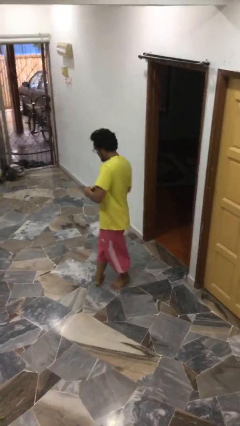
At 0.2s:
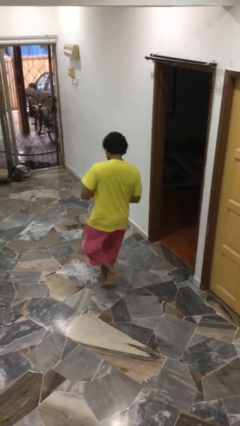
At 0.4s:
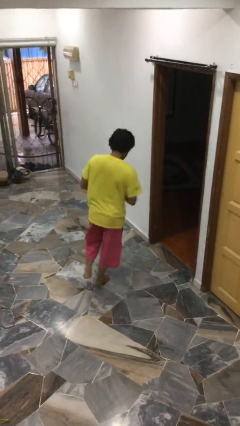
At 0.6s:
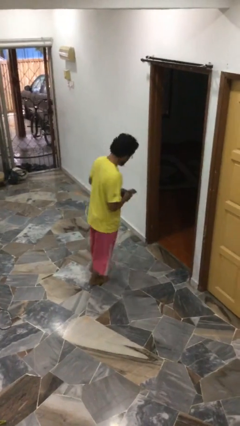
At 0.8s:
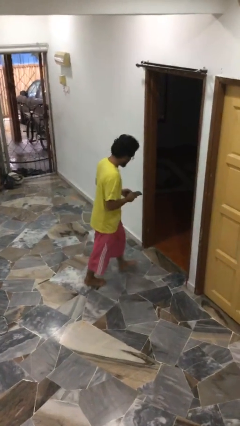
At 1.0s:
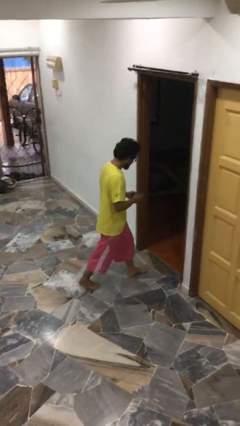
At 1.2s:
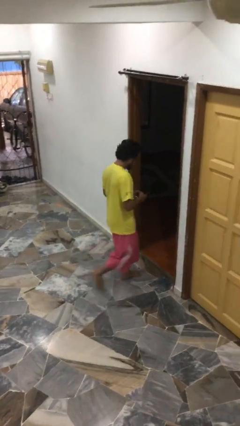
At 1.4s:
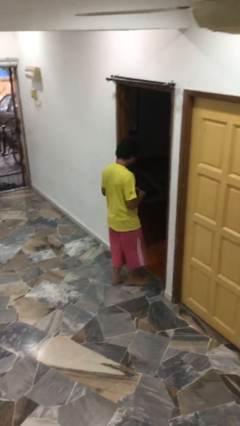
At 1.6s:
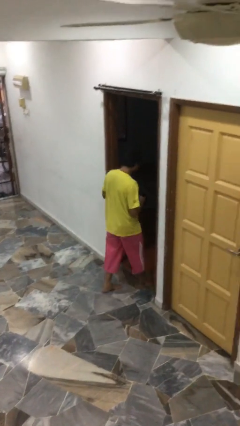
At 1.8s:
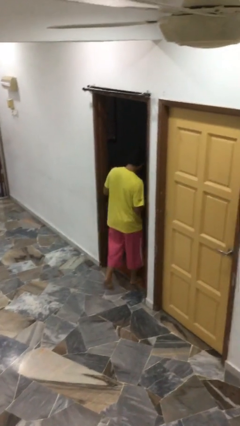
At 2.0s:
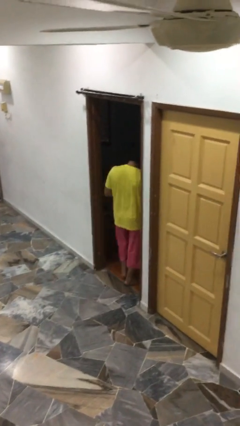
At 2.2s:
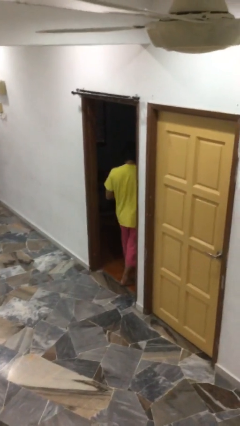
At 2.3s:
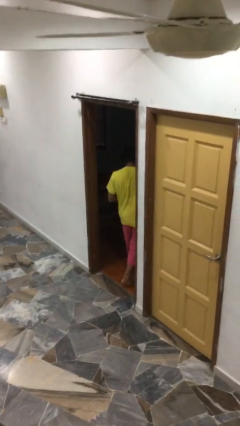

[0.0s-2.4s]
person exits scene through structure

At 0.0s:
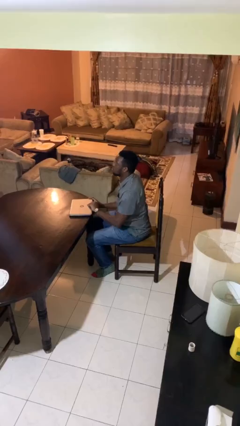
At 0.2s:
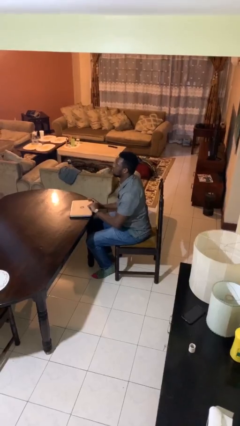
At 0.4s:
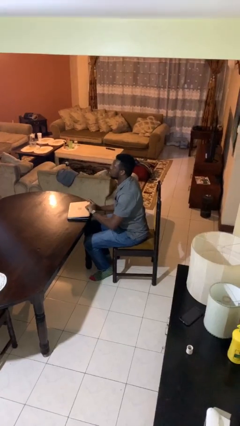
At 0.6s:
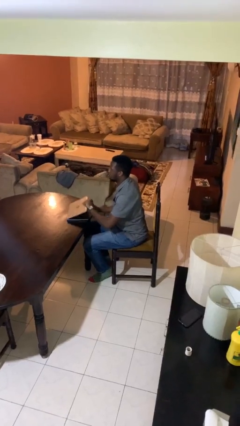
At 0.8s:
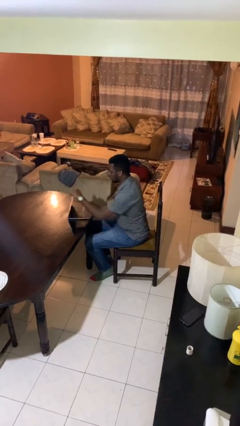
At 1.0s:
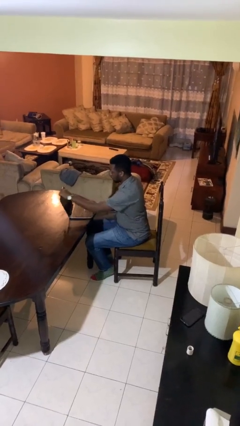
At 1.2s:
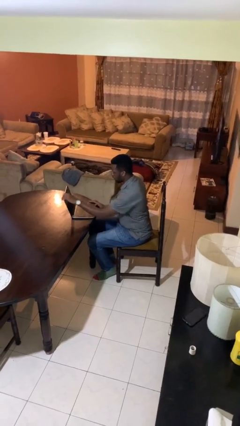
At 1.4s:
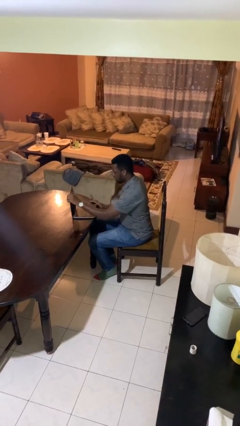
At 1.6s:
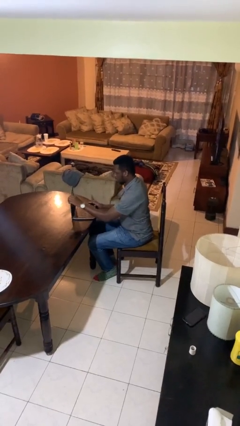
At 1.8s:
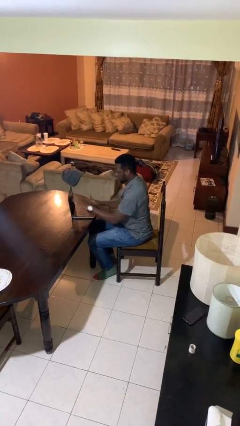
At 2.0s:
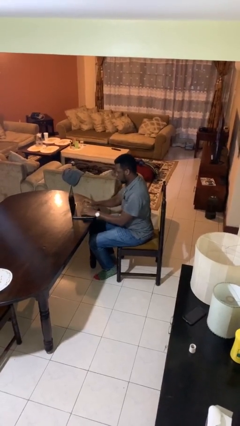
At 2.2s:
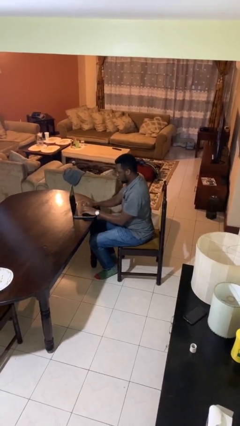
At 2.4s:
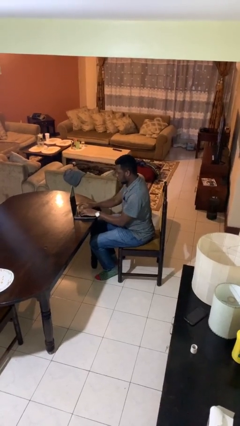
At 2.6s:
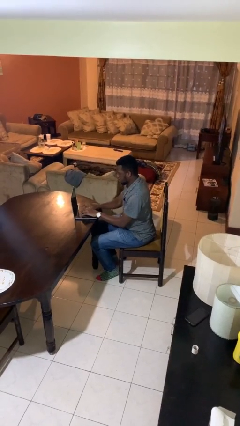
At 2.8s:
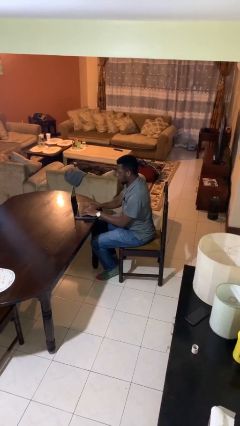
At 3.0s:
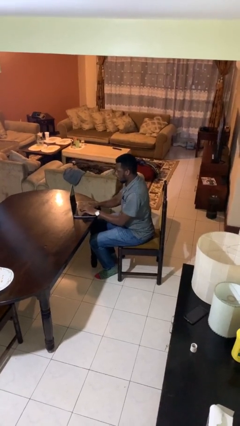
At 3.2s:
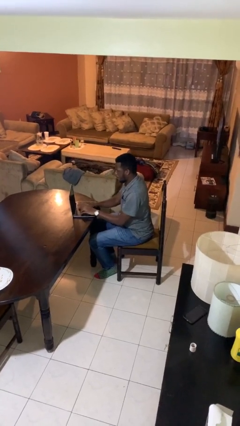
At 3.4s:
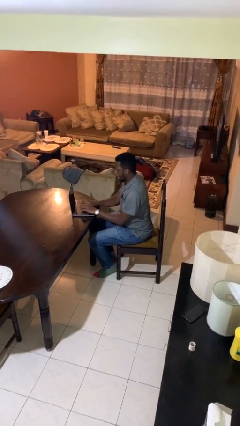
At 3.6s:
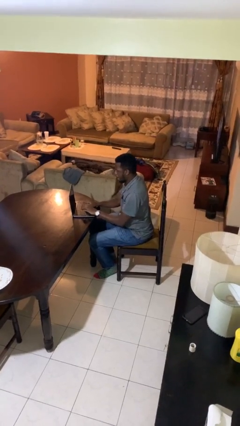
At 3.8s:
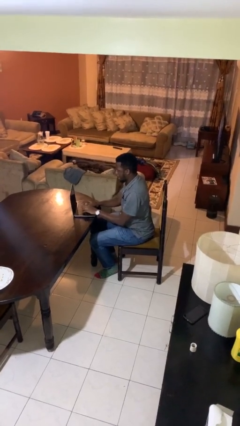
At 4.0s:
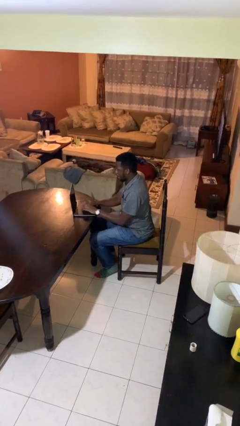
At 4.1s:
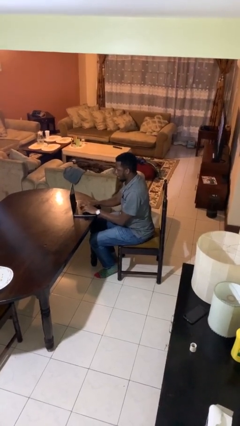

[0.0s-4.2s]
person interacts with laptop

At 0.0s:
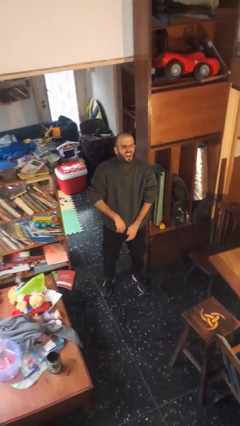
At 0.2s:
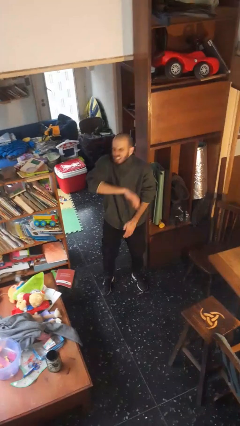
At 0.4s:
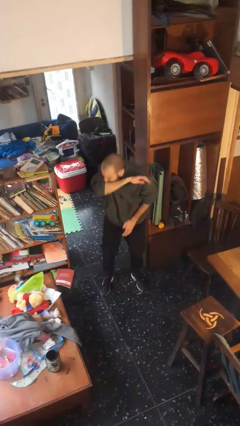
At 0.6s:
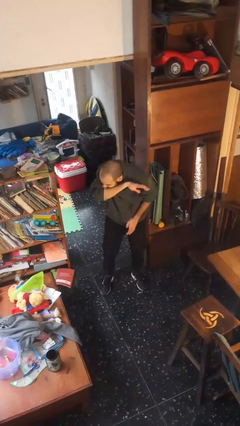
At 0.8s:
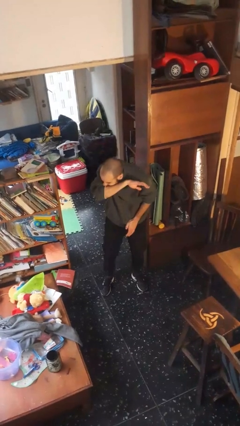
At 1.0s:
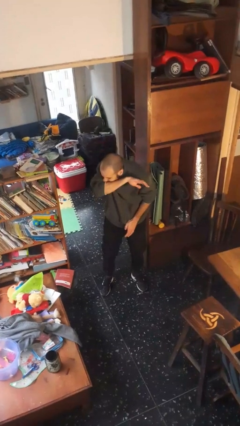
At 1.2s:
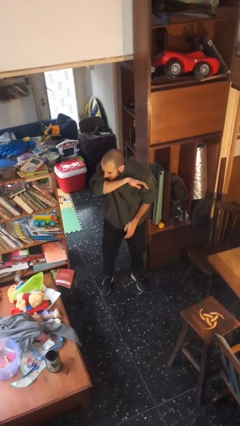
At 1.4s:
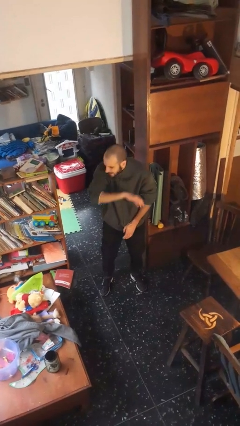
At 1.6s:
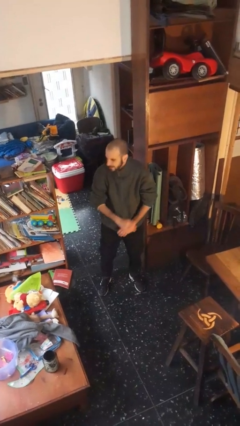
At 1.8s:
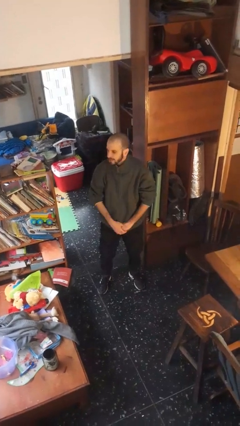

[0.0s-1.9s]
person sneezes into arm

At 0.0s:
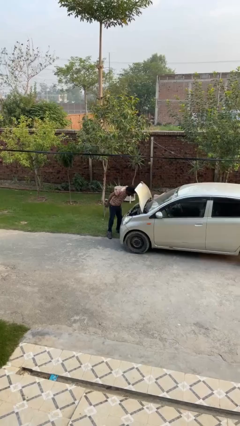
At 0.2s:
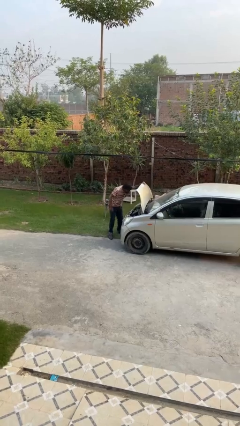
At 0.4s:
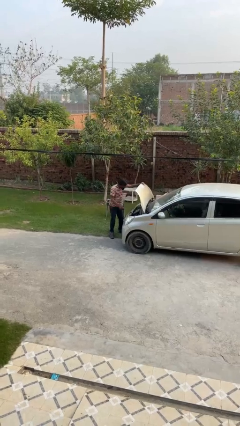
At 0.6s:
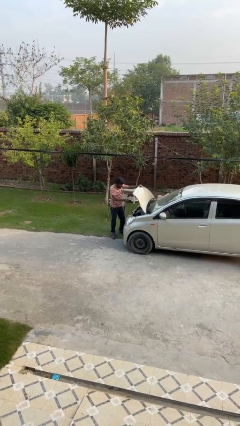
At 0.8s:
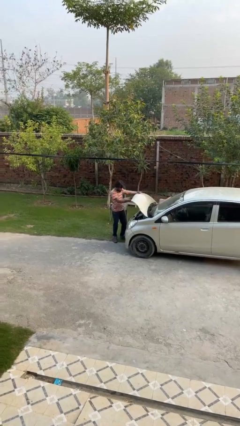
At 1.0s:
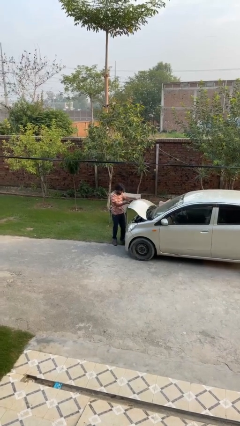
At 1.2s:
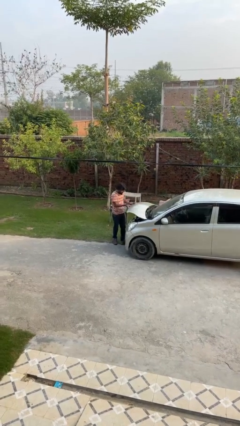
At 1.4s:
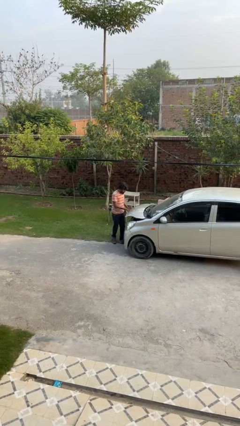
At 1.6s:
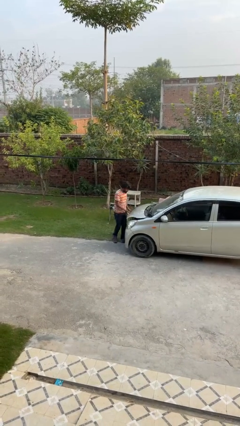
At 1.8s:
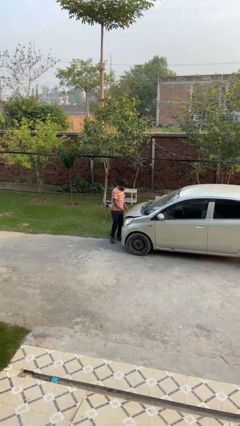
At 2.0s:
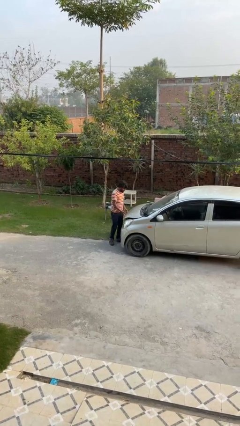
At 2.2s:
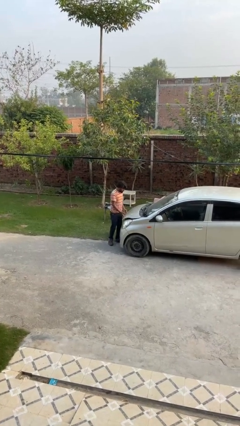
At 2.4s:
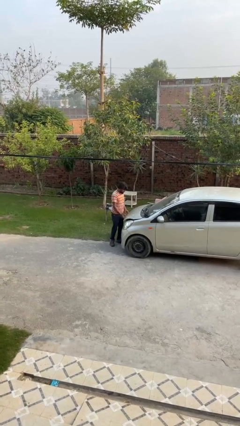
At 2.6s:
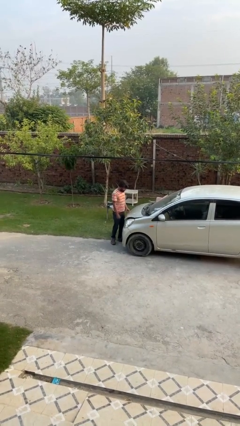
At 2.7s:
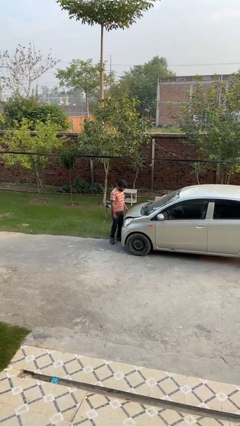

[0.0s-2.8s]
person closes car hood

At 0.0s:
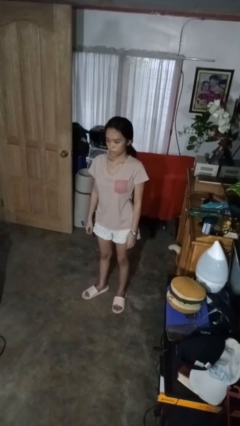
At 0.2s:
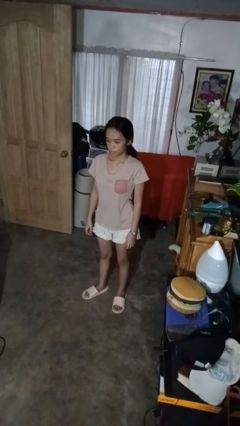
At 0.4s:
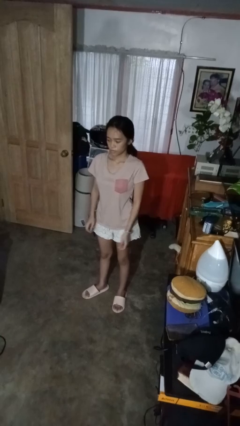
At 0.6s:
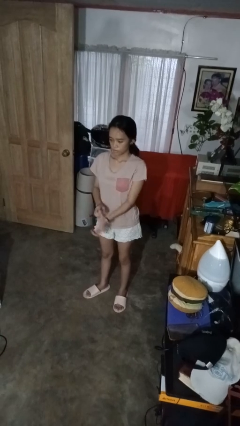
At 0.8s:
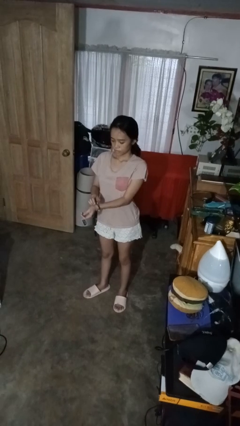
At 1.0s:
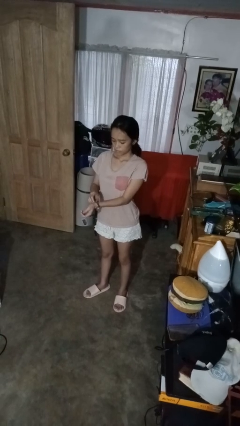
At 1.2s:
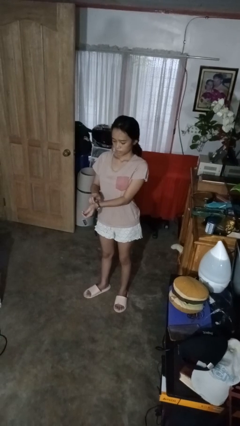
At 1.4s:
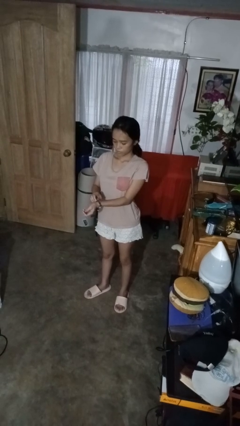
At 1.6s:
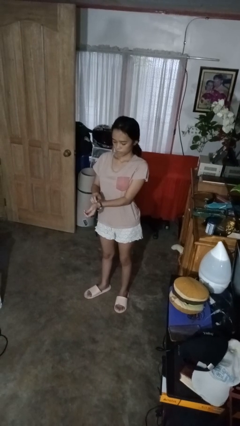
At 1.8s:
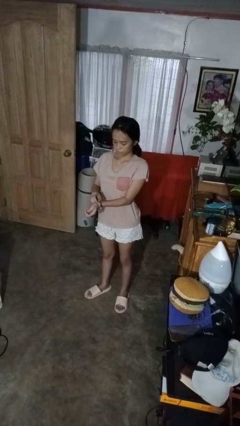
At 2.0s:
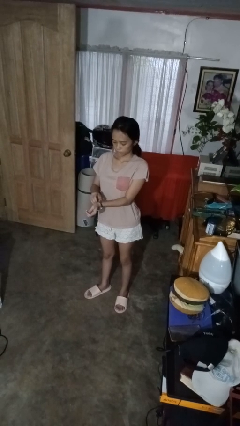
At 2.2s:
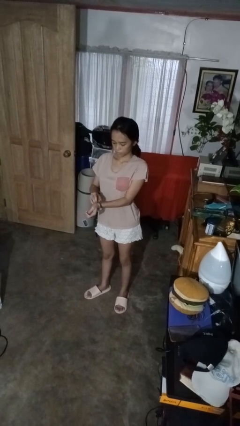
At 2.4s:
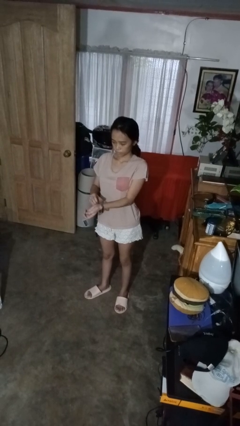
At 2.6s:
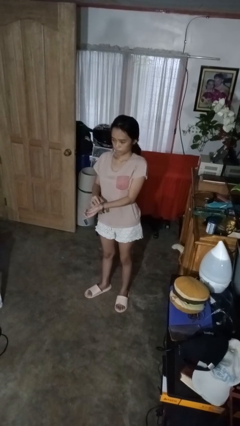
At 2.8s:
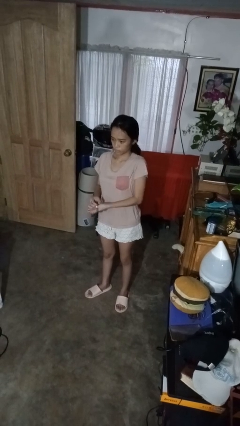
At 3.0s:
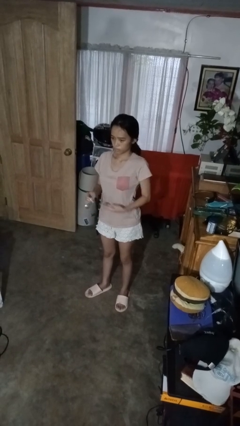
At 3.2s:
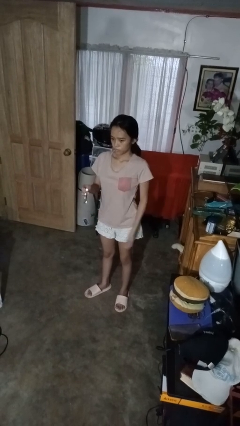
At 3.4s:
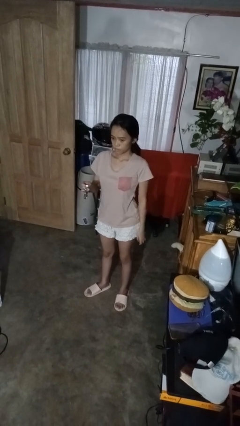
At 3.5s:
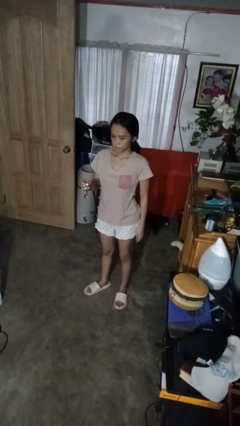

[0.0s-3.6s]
person takes off wristwatch

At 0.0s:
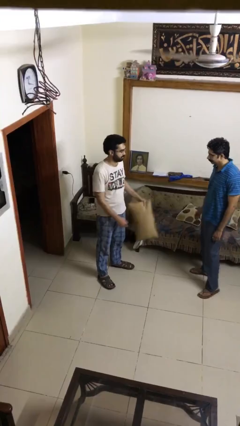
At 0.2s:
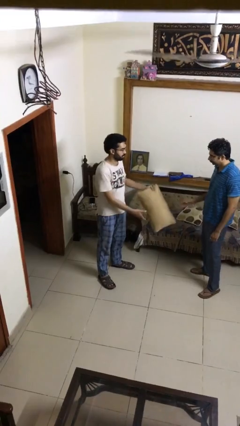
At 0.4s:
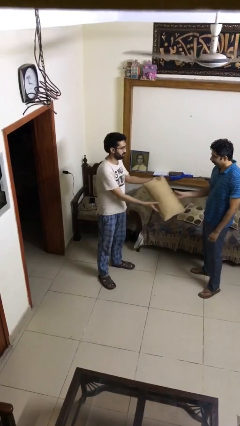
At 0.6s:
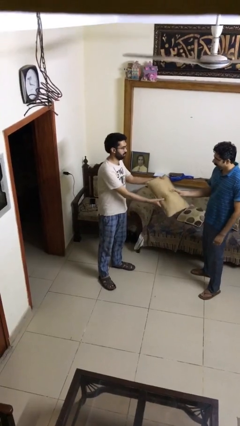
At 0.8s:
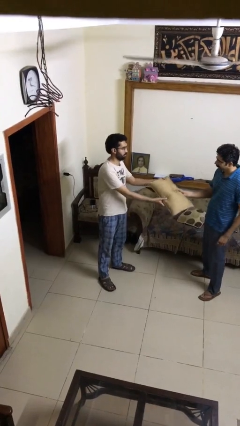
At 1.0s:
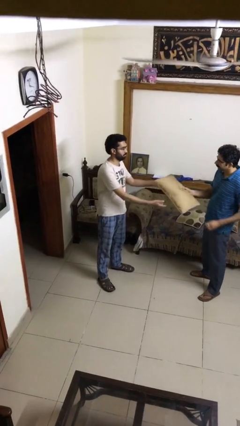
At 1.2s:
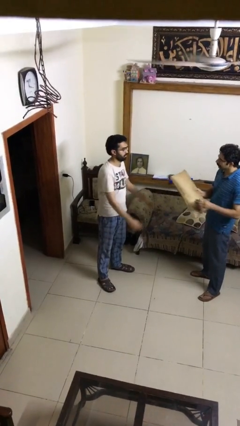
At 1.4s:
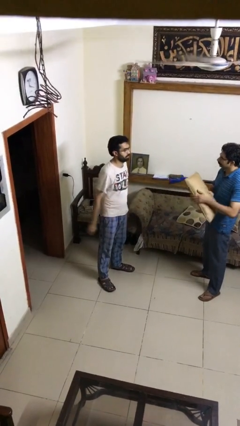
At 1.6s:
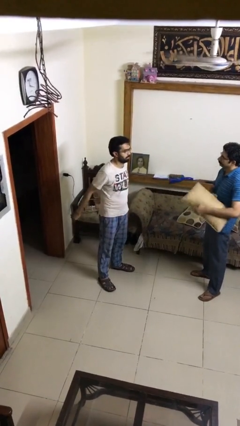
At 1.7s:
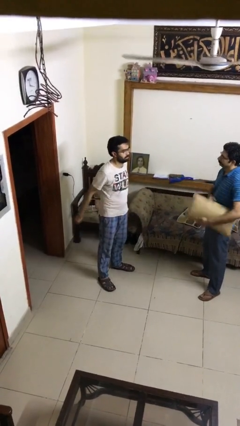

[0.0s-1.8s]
person transfers object to person

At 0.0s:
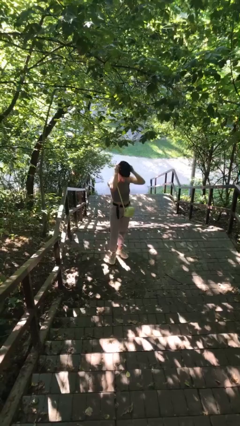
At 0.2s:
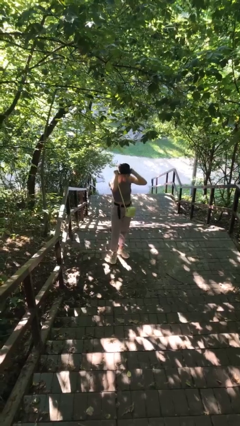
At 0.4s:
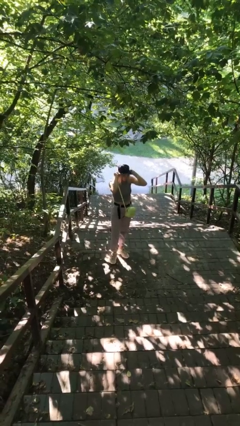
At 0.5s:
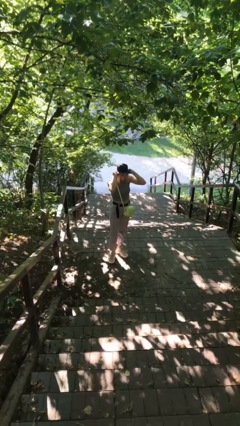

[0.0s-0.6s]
person puts on hat
